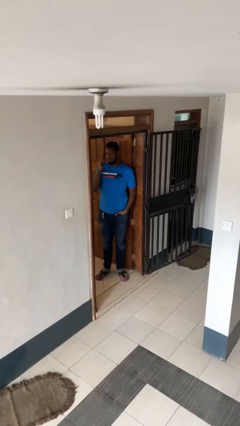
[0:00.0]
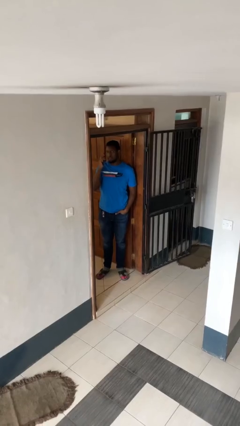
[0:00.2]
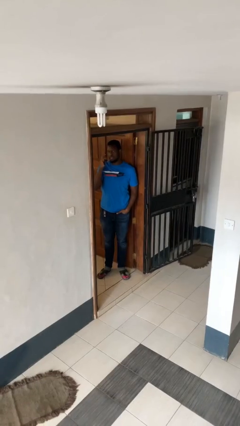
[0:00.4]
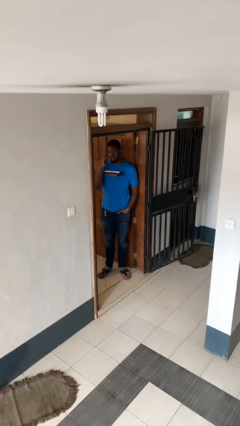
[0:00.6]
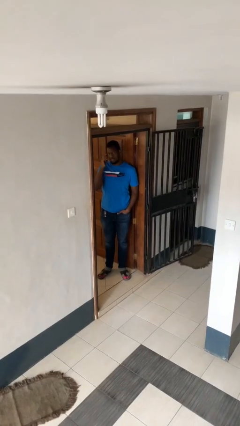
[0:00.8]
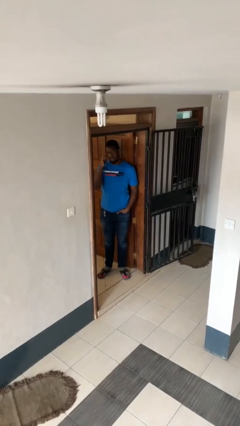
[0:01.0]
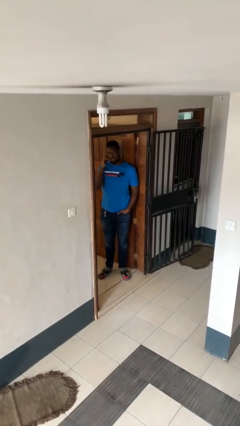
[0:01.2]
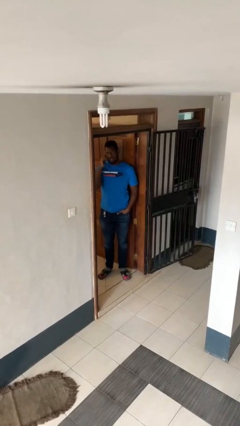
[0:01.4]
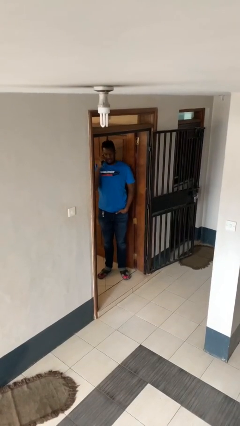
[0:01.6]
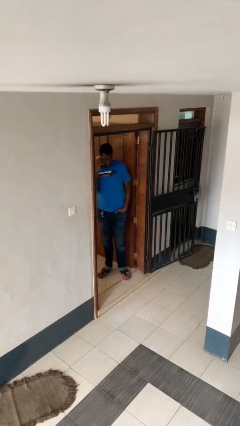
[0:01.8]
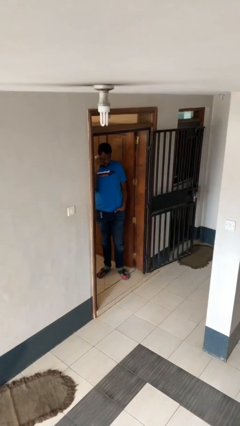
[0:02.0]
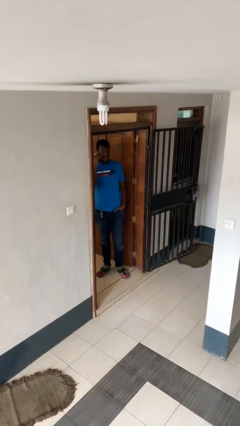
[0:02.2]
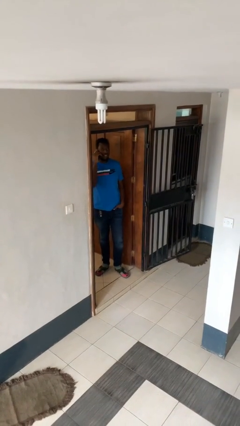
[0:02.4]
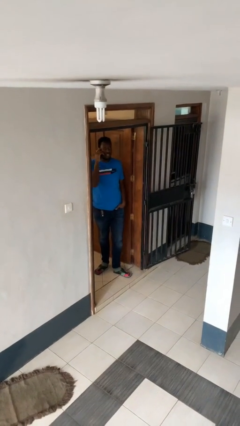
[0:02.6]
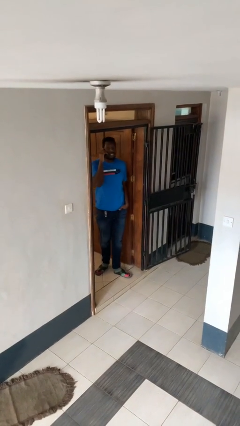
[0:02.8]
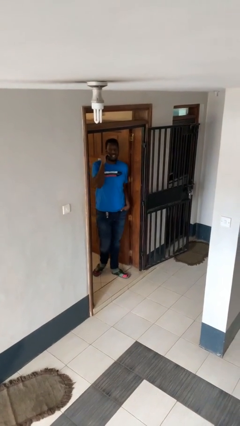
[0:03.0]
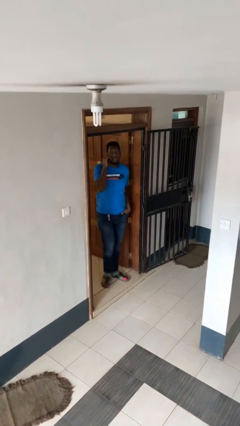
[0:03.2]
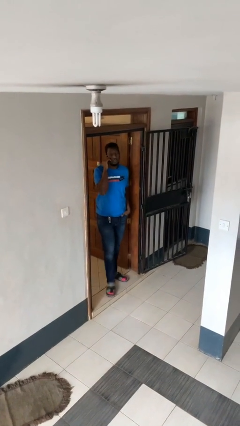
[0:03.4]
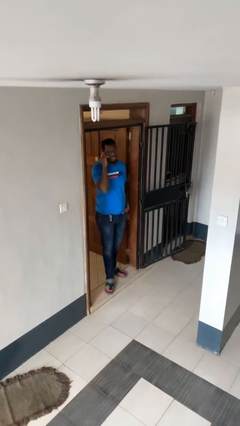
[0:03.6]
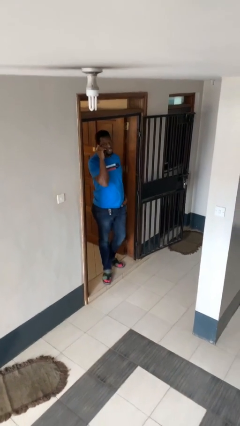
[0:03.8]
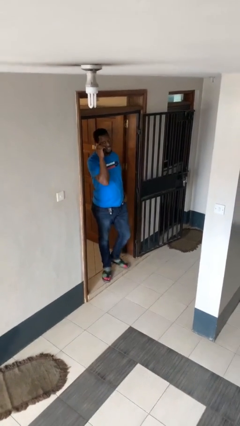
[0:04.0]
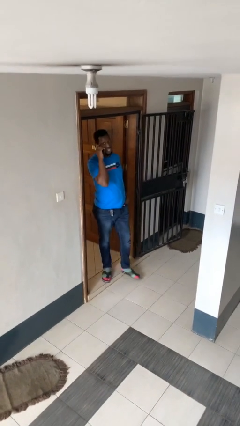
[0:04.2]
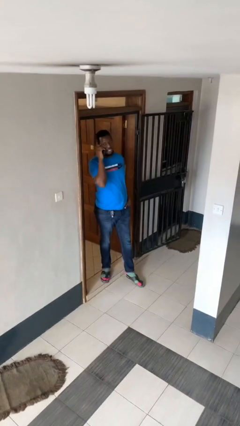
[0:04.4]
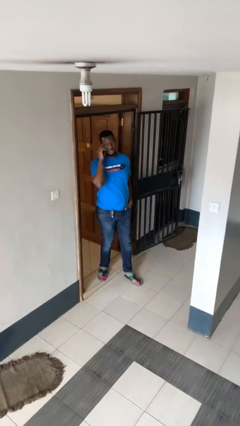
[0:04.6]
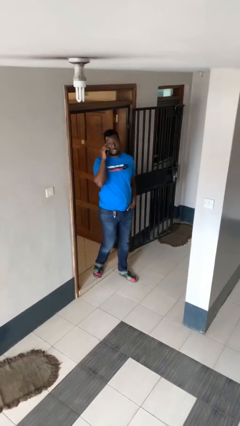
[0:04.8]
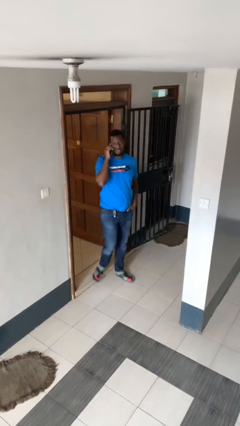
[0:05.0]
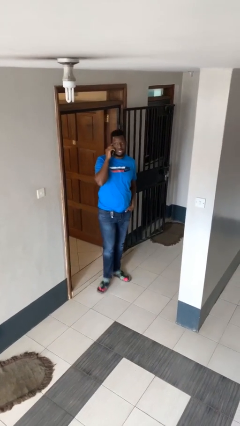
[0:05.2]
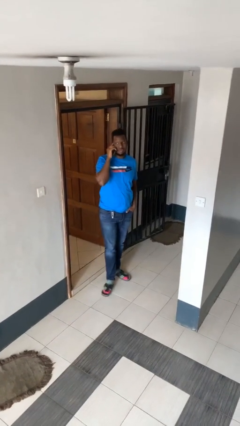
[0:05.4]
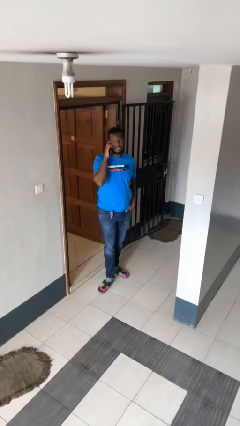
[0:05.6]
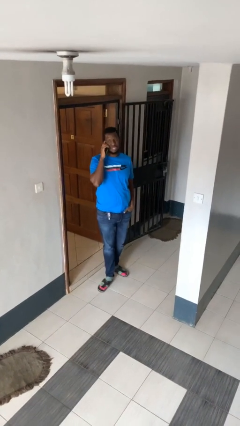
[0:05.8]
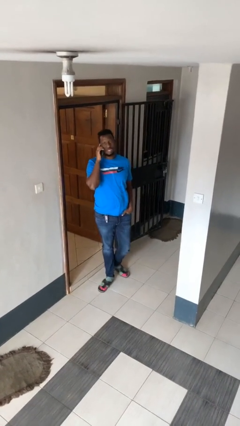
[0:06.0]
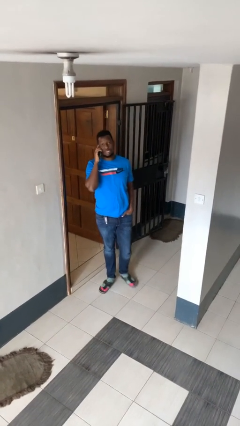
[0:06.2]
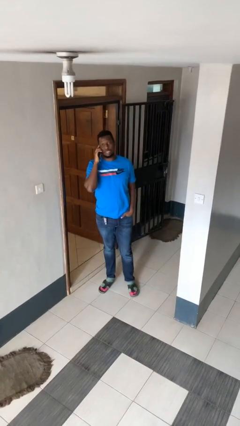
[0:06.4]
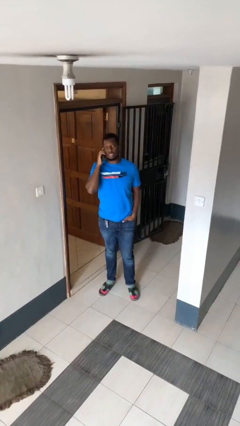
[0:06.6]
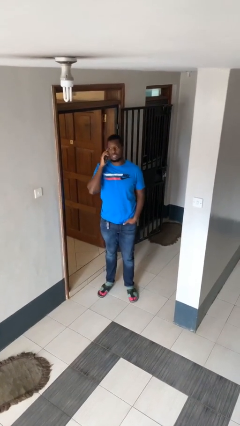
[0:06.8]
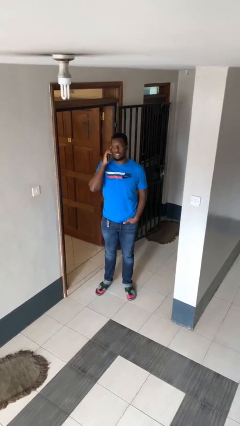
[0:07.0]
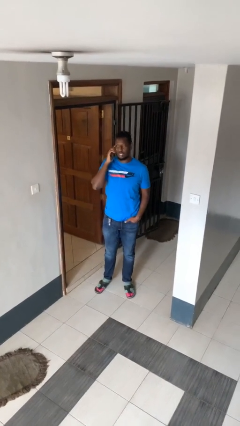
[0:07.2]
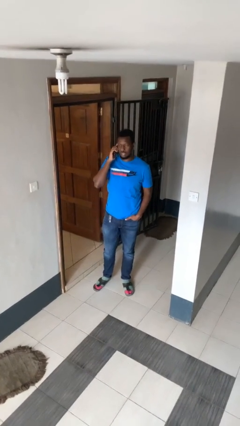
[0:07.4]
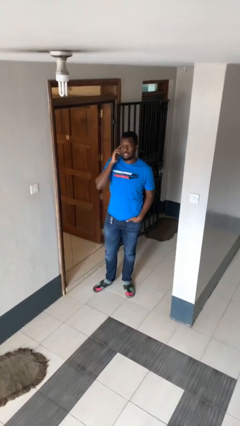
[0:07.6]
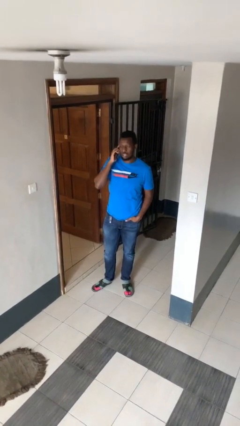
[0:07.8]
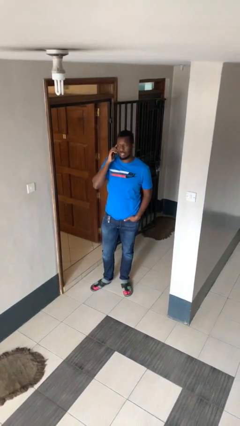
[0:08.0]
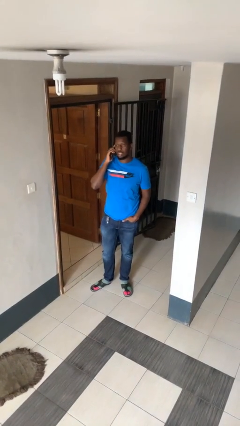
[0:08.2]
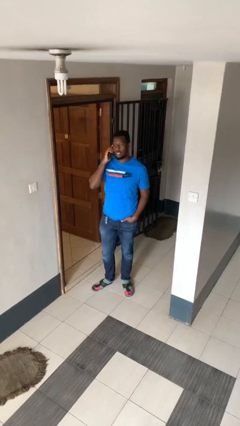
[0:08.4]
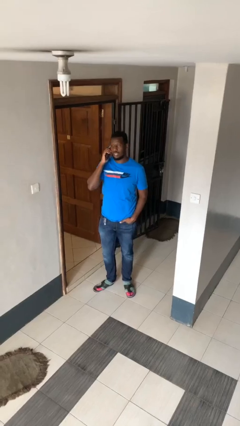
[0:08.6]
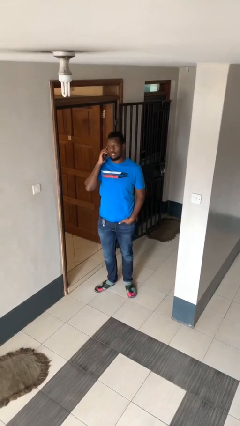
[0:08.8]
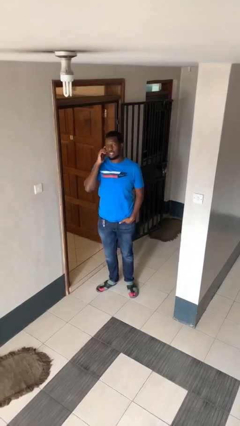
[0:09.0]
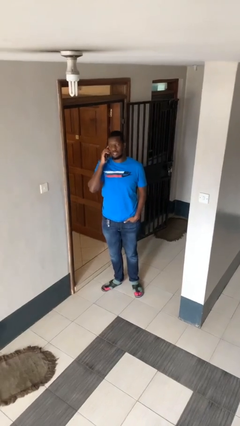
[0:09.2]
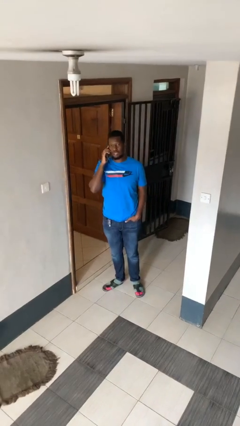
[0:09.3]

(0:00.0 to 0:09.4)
person enters scene through structure

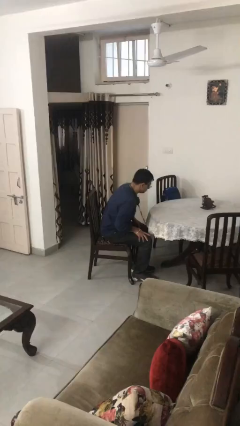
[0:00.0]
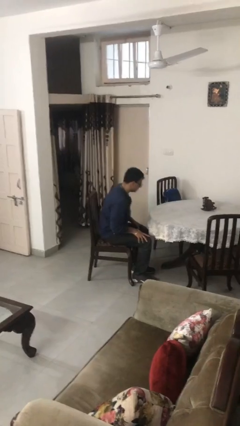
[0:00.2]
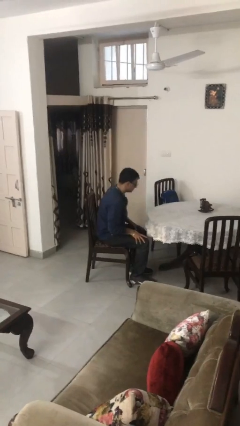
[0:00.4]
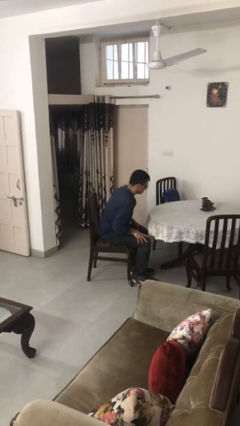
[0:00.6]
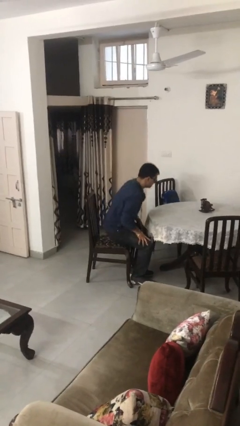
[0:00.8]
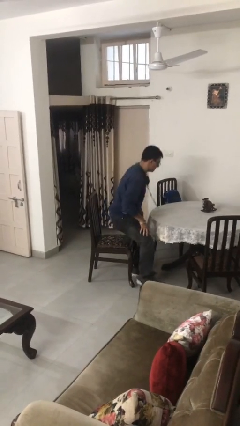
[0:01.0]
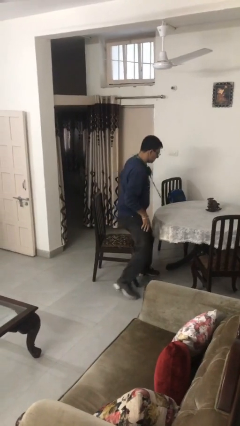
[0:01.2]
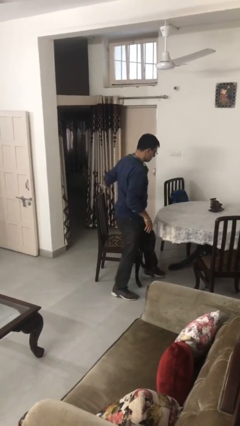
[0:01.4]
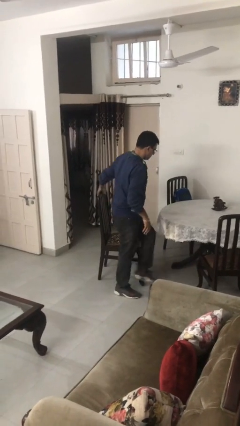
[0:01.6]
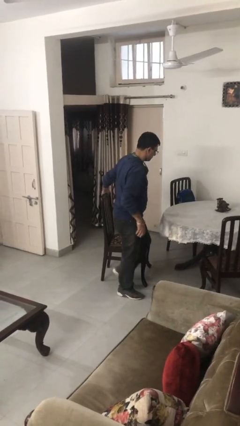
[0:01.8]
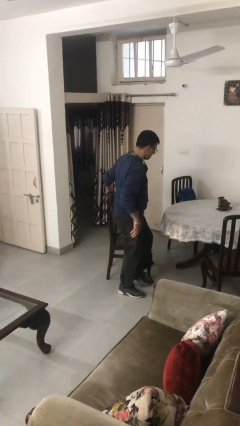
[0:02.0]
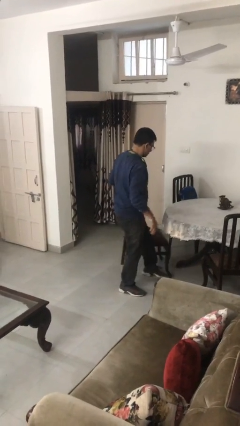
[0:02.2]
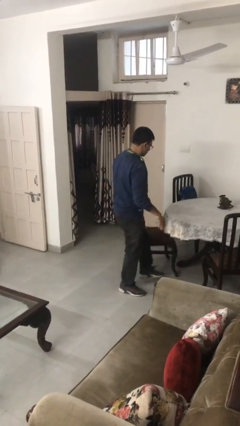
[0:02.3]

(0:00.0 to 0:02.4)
person stands up

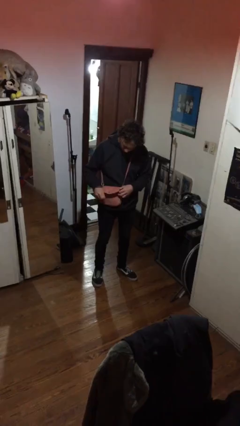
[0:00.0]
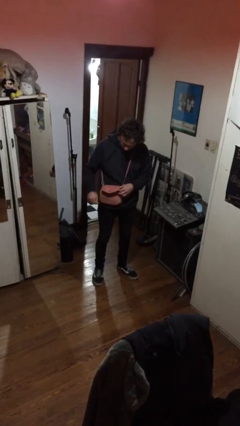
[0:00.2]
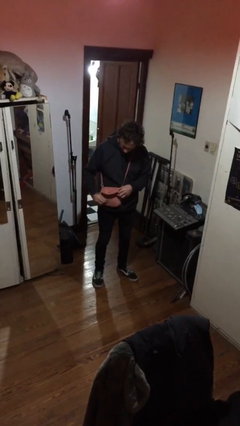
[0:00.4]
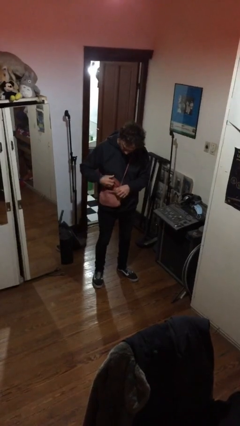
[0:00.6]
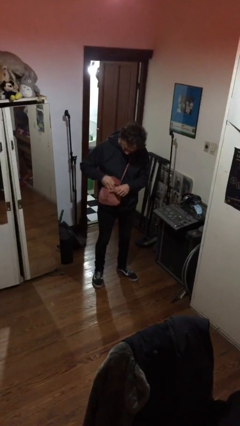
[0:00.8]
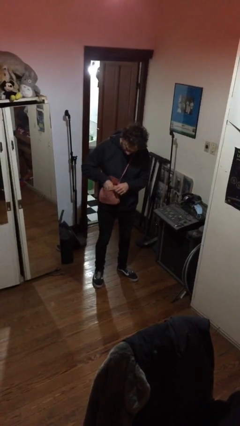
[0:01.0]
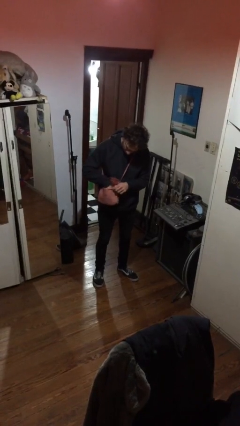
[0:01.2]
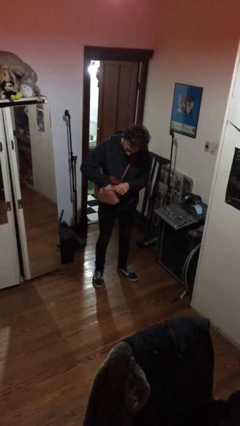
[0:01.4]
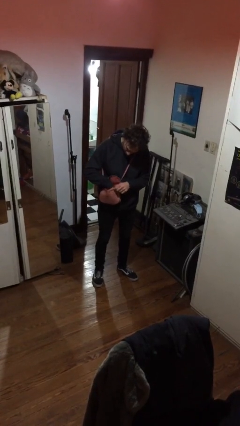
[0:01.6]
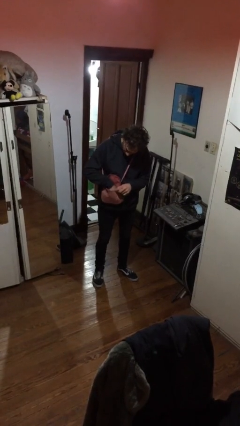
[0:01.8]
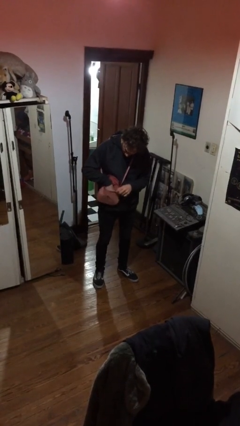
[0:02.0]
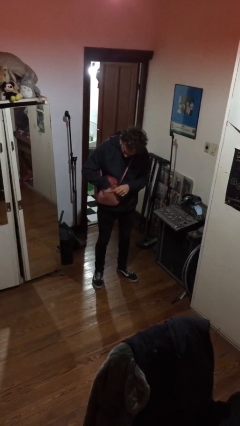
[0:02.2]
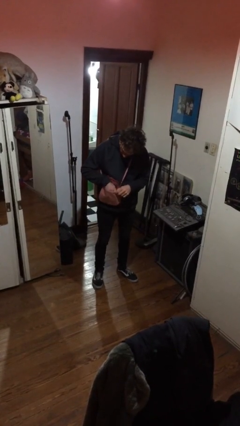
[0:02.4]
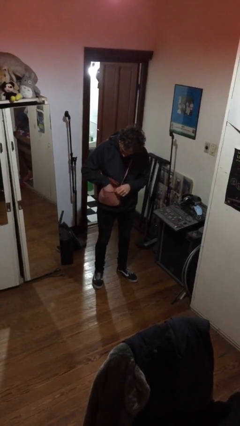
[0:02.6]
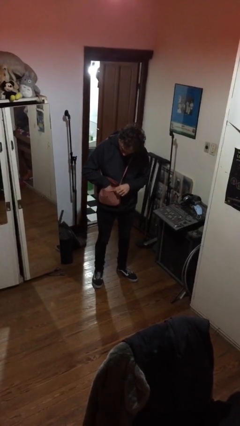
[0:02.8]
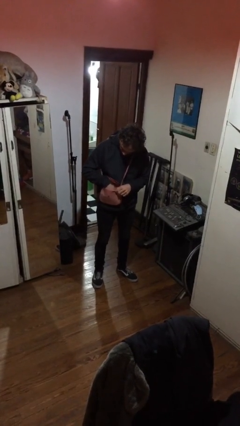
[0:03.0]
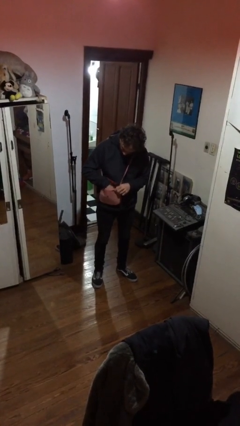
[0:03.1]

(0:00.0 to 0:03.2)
person searches in purse

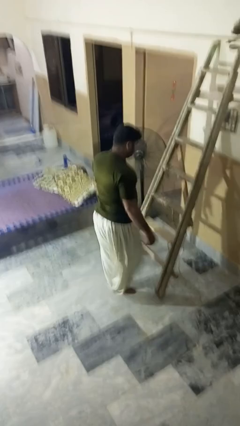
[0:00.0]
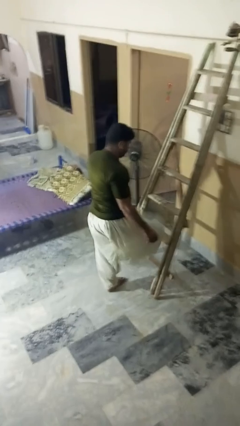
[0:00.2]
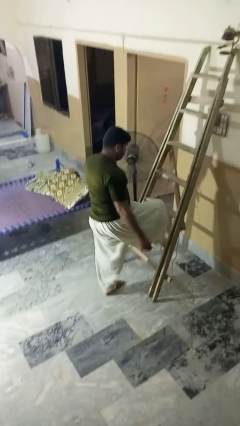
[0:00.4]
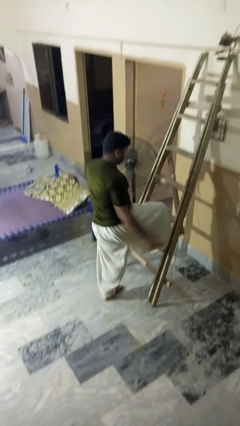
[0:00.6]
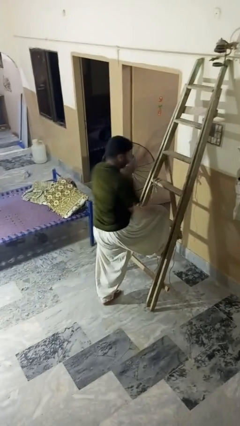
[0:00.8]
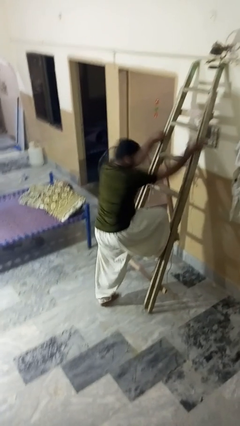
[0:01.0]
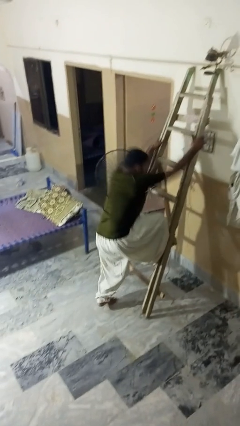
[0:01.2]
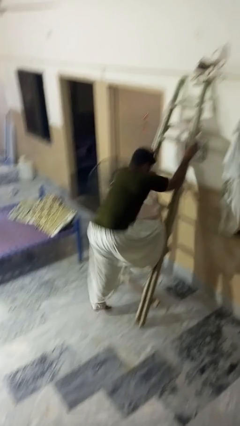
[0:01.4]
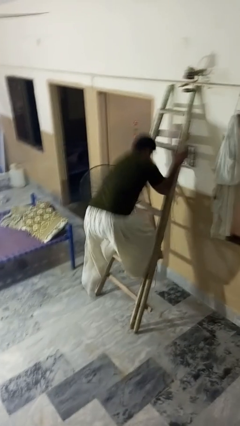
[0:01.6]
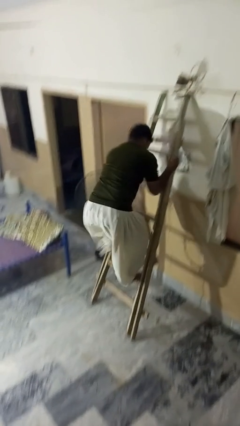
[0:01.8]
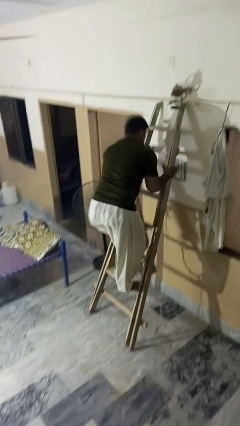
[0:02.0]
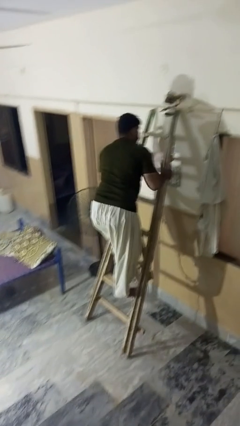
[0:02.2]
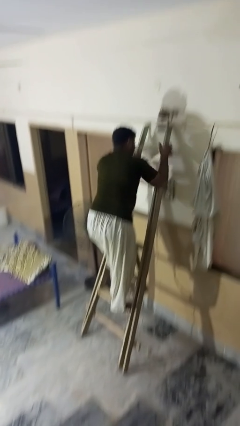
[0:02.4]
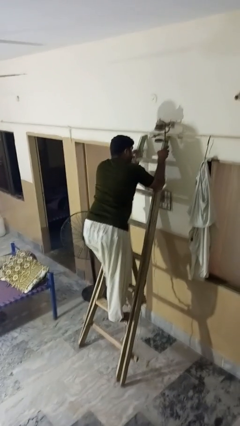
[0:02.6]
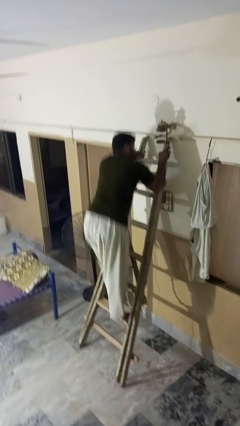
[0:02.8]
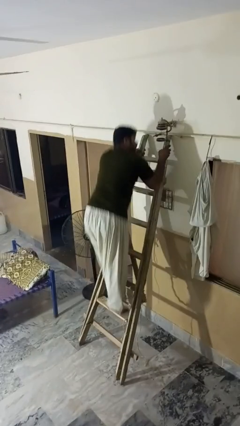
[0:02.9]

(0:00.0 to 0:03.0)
person climbs up ladder

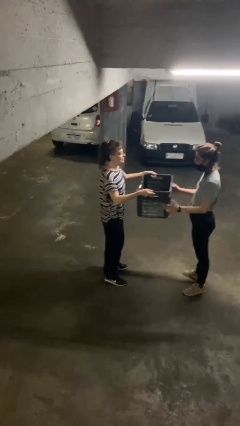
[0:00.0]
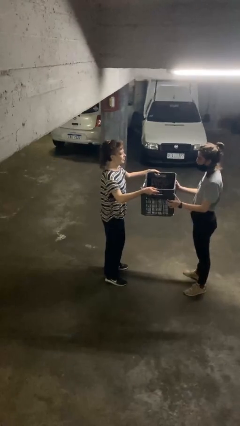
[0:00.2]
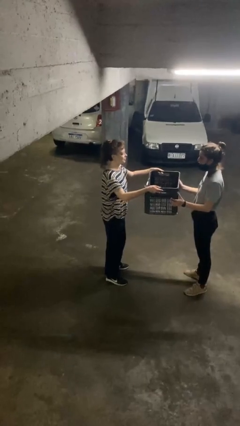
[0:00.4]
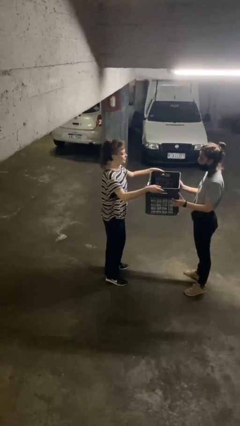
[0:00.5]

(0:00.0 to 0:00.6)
person transfers object to person
